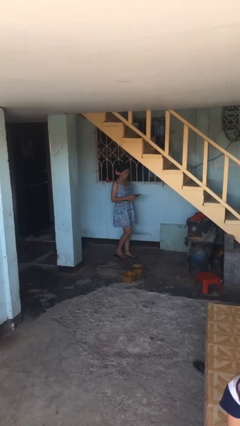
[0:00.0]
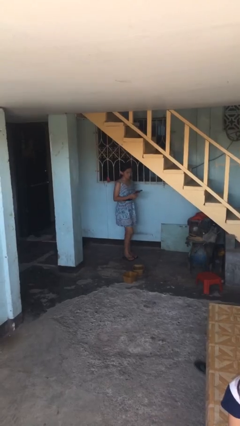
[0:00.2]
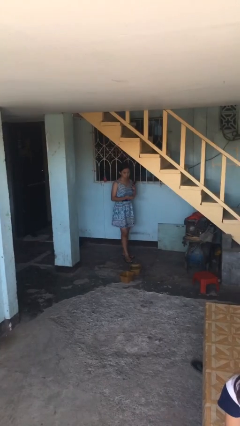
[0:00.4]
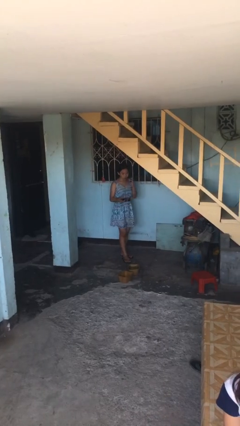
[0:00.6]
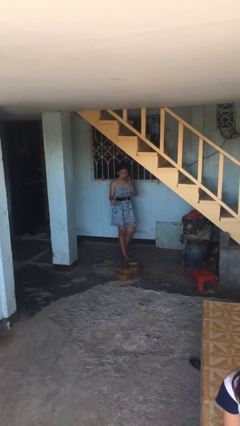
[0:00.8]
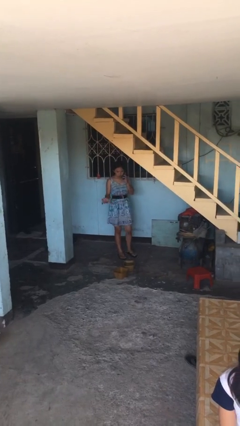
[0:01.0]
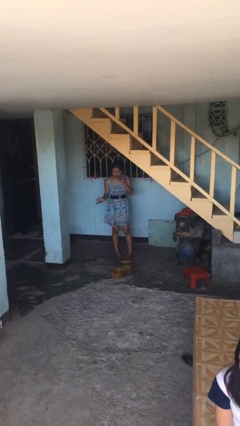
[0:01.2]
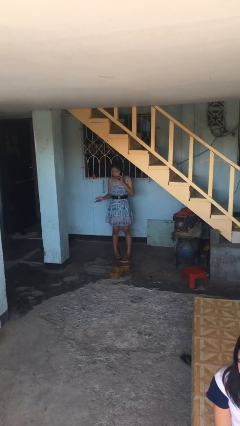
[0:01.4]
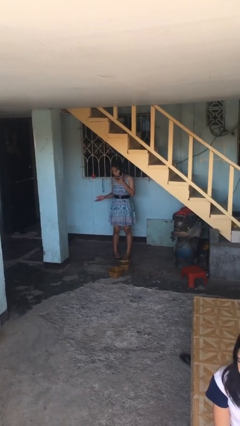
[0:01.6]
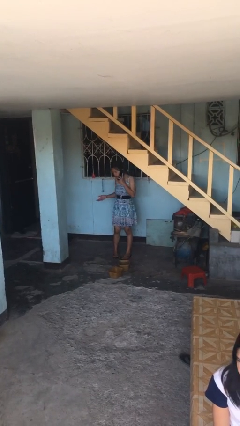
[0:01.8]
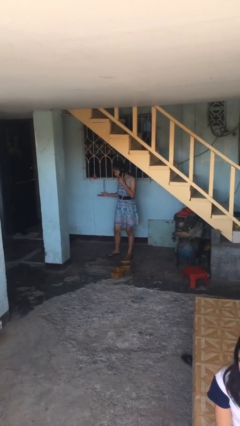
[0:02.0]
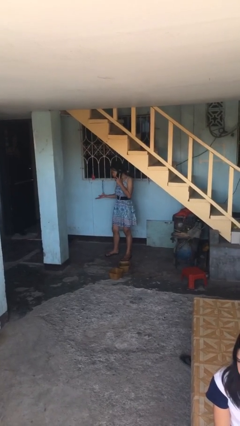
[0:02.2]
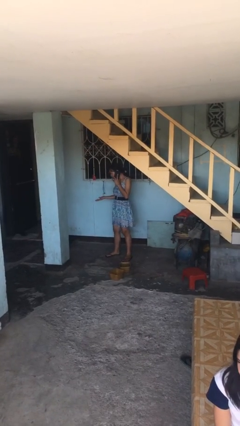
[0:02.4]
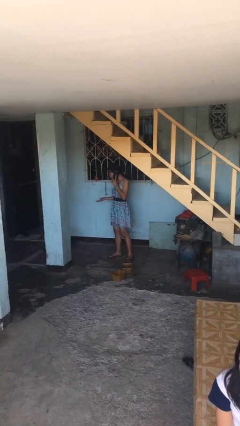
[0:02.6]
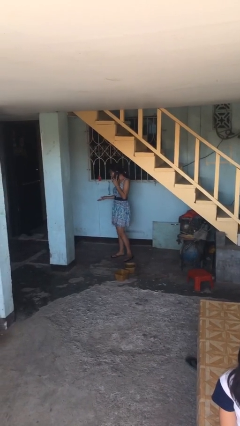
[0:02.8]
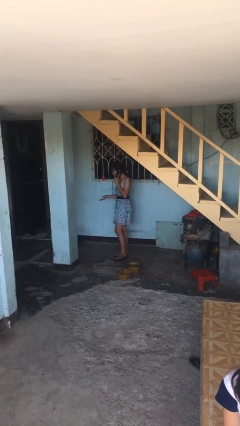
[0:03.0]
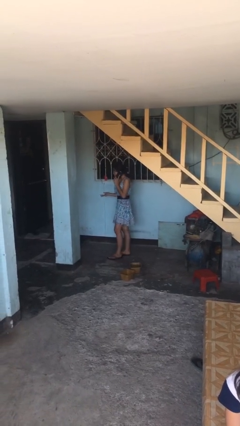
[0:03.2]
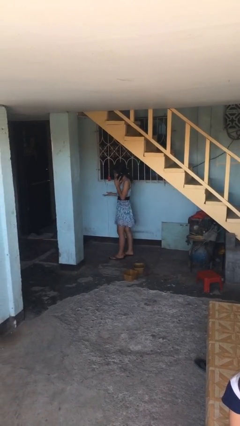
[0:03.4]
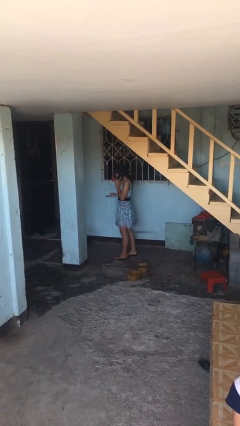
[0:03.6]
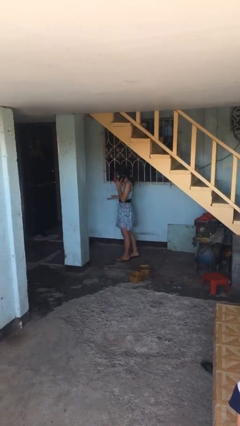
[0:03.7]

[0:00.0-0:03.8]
person talks on phone

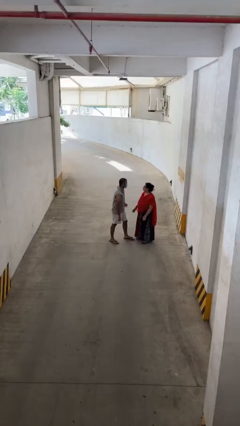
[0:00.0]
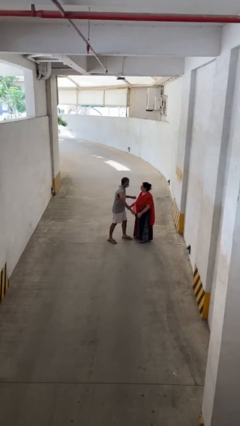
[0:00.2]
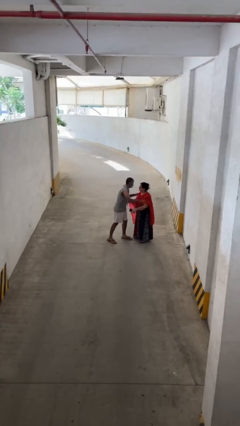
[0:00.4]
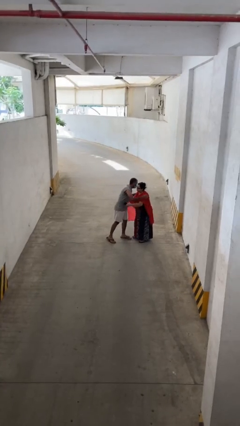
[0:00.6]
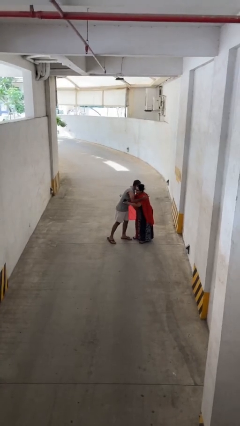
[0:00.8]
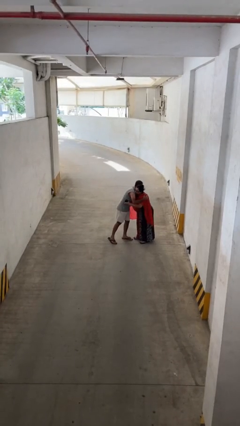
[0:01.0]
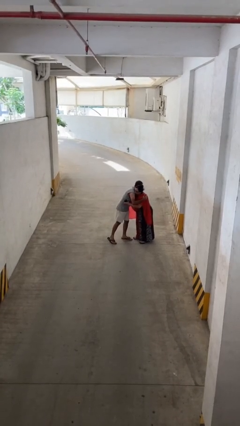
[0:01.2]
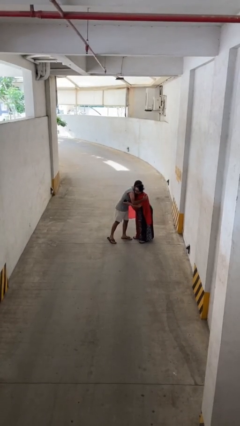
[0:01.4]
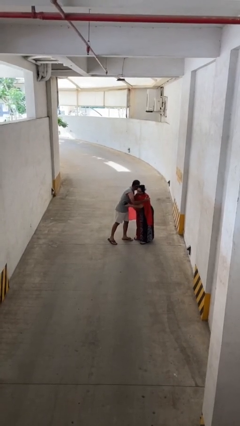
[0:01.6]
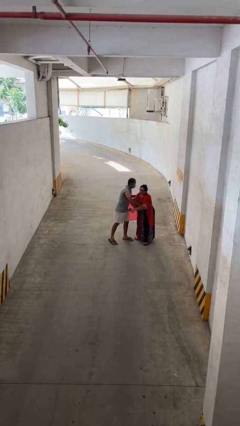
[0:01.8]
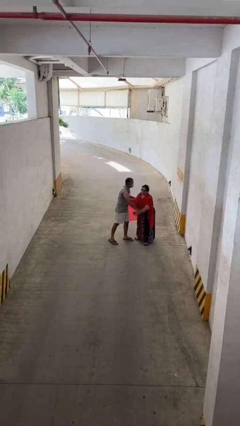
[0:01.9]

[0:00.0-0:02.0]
person embraces person

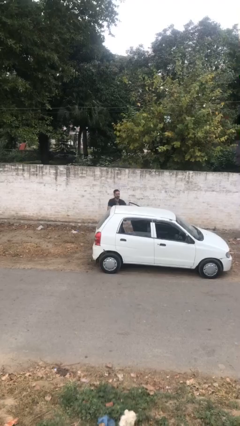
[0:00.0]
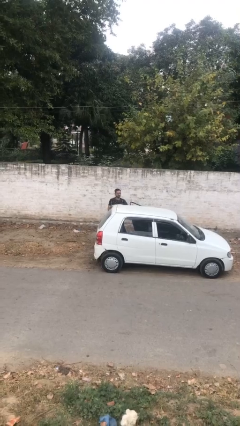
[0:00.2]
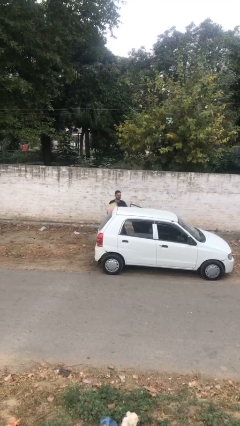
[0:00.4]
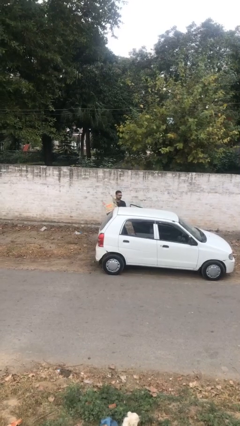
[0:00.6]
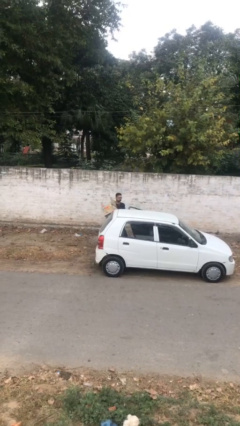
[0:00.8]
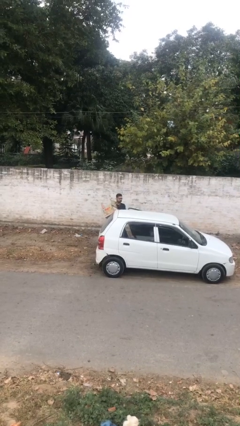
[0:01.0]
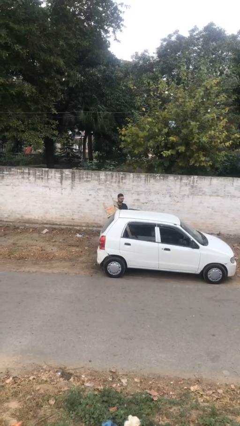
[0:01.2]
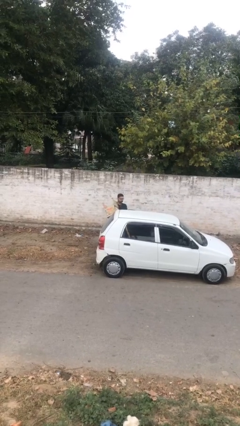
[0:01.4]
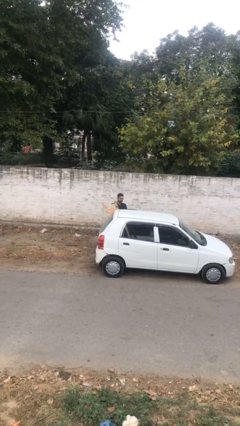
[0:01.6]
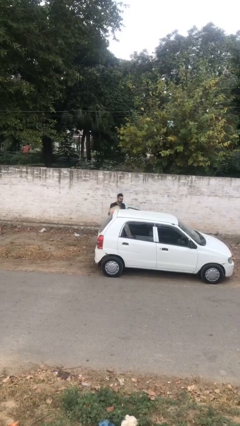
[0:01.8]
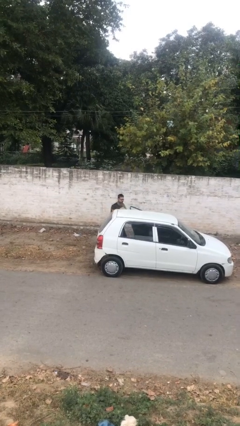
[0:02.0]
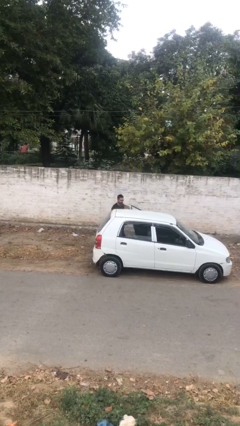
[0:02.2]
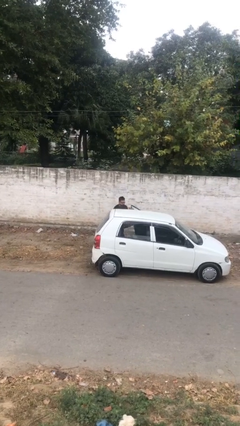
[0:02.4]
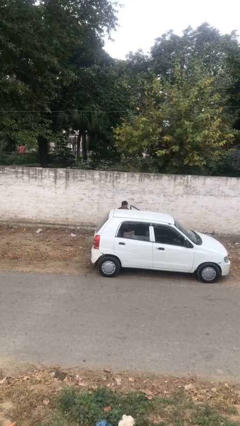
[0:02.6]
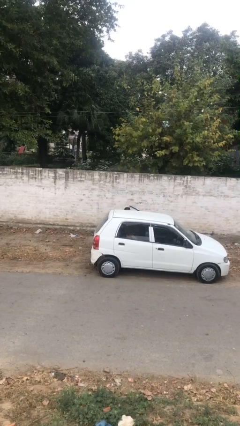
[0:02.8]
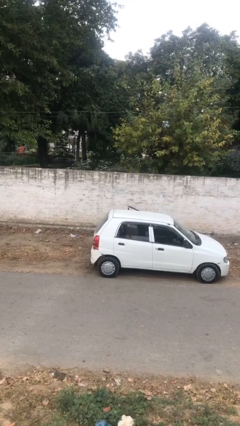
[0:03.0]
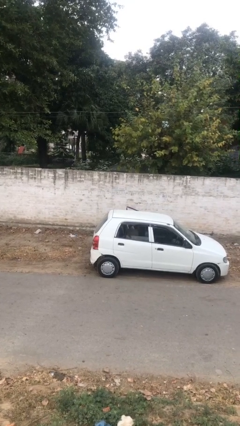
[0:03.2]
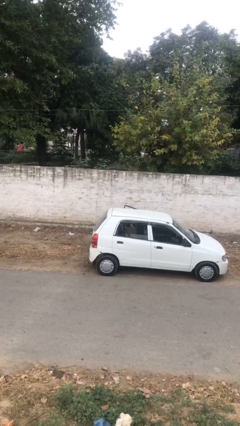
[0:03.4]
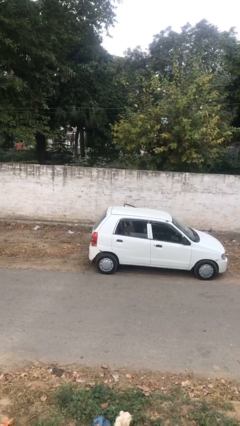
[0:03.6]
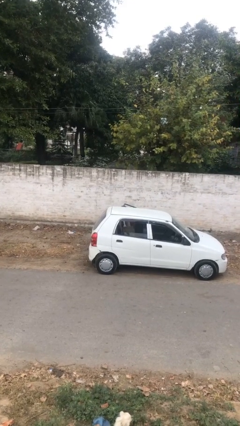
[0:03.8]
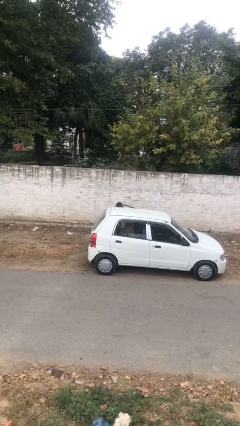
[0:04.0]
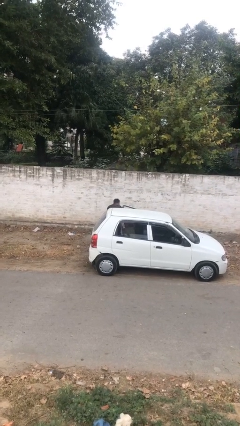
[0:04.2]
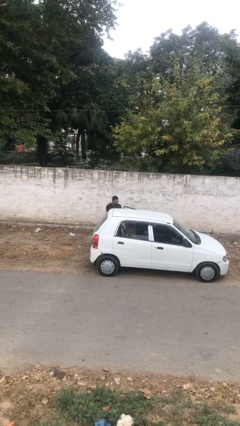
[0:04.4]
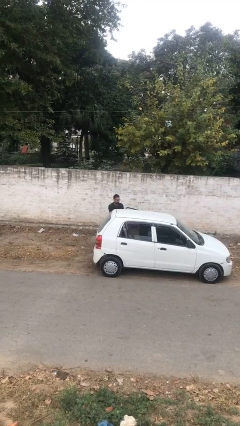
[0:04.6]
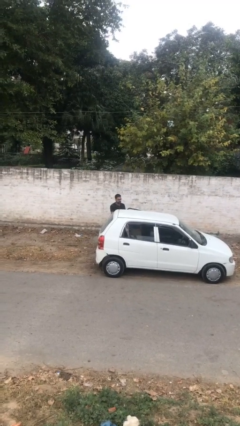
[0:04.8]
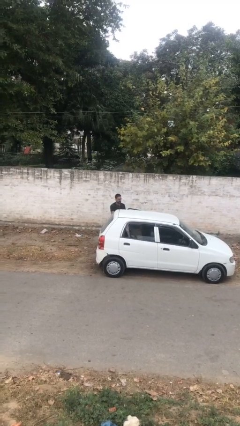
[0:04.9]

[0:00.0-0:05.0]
person loads car

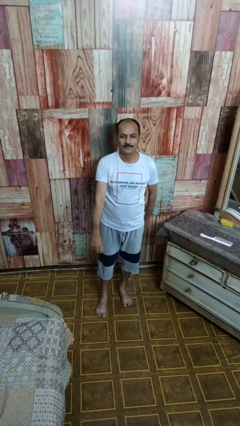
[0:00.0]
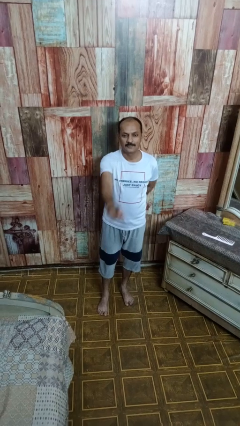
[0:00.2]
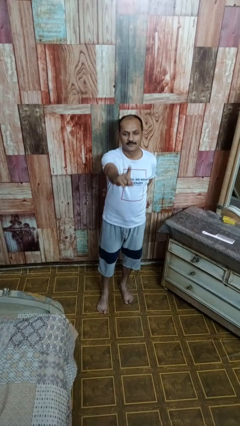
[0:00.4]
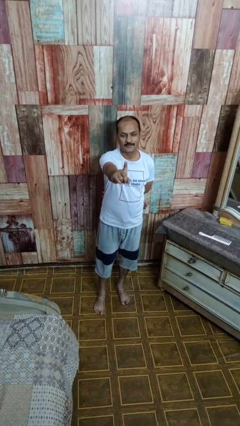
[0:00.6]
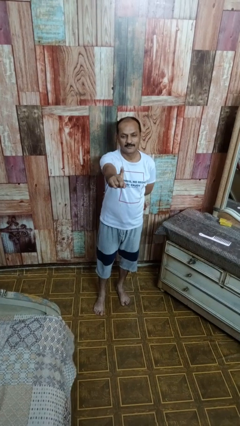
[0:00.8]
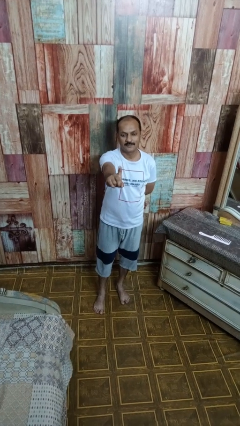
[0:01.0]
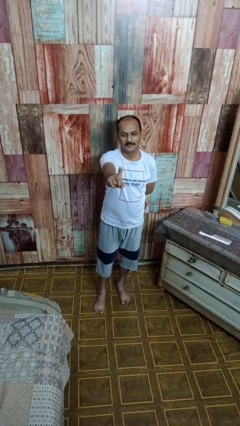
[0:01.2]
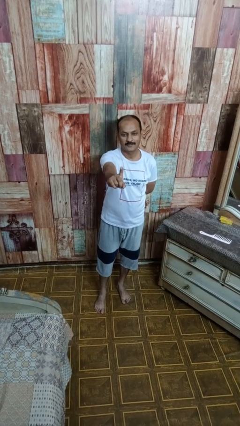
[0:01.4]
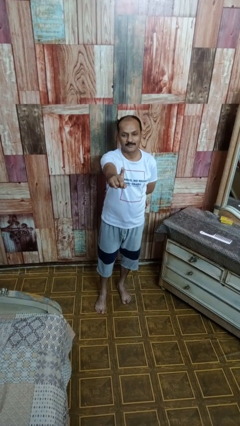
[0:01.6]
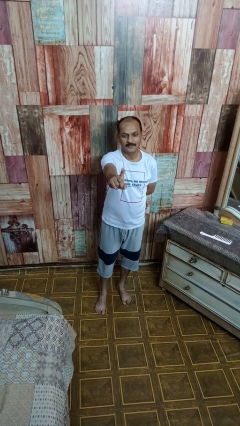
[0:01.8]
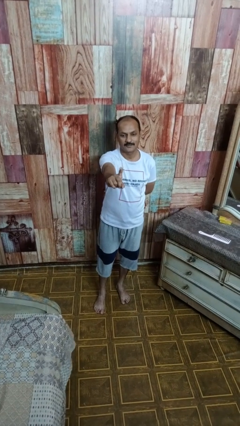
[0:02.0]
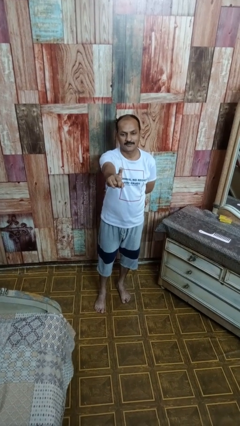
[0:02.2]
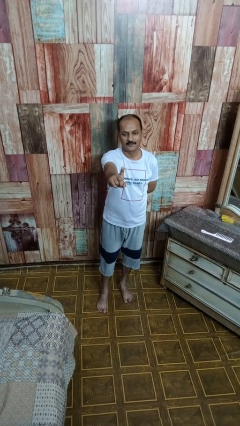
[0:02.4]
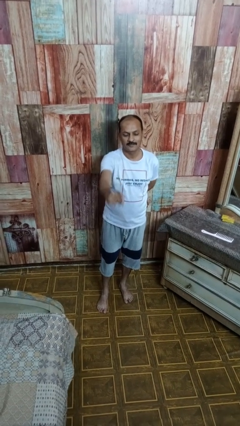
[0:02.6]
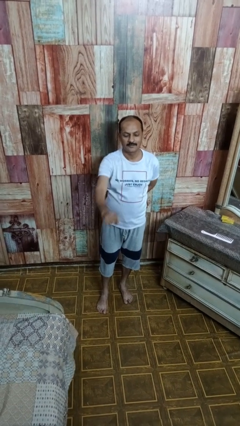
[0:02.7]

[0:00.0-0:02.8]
person gestures number one

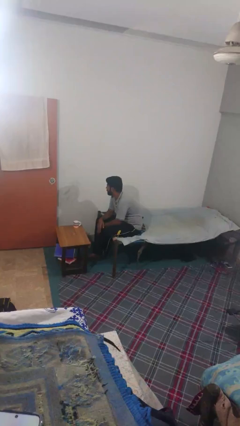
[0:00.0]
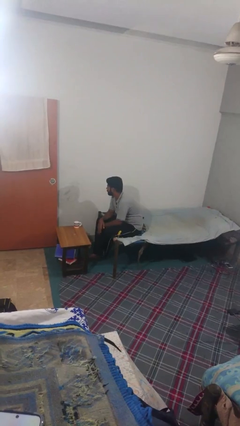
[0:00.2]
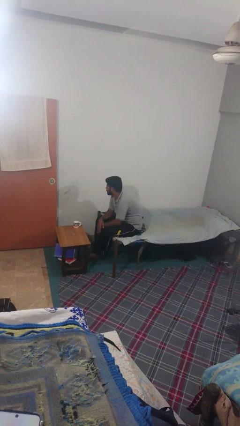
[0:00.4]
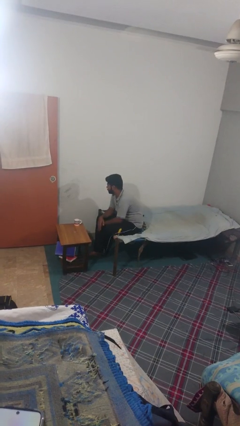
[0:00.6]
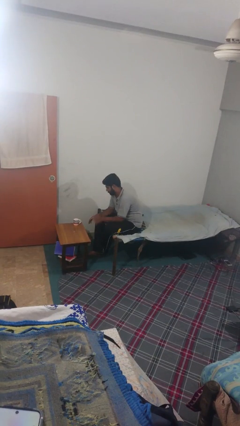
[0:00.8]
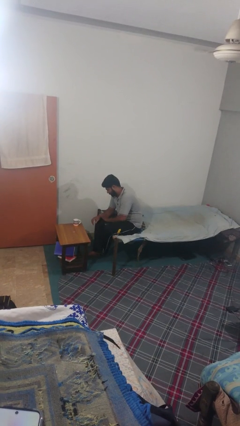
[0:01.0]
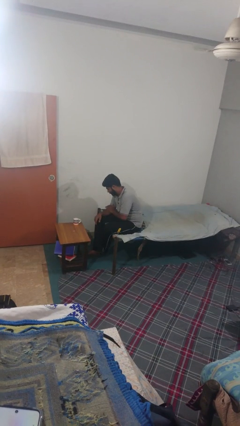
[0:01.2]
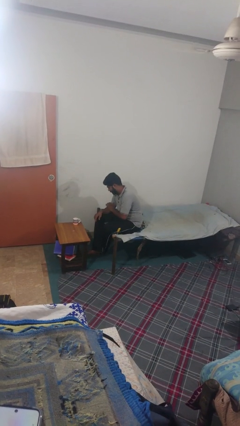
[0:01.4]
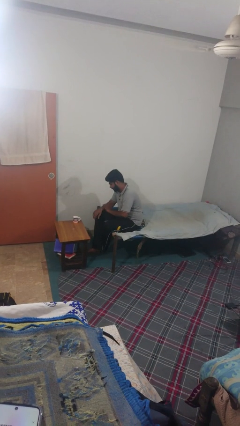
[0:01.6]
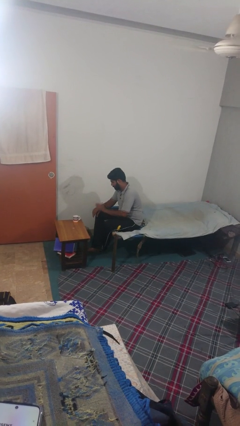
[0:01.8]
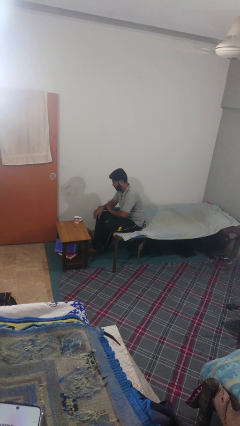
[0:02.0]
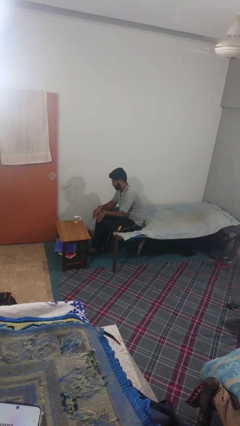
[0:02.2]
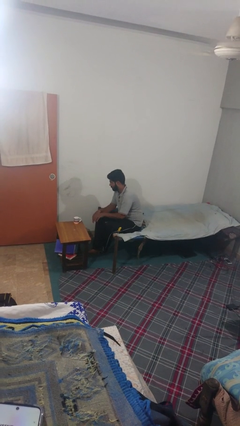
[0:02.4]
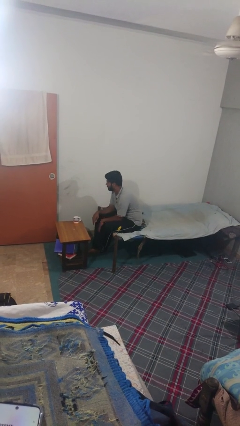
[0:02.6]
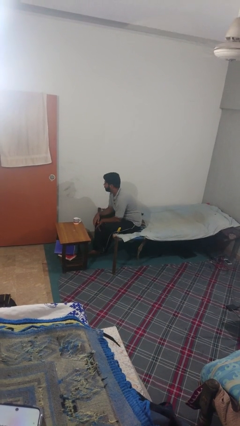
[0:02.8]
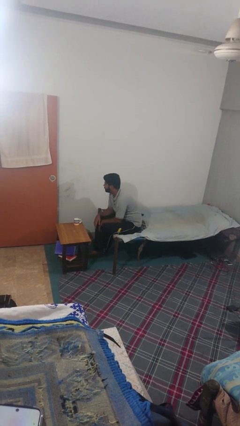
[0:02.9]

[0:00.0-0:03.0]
person swats bug

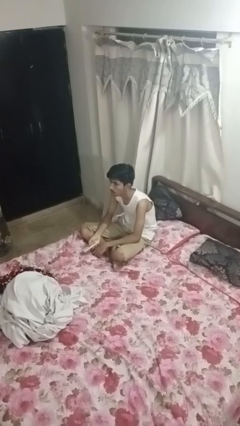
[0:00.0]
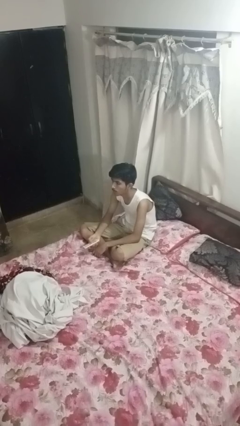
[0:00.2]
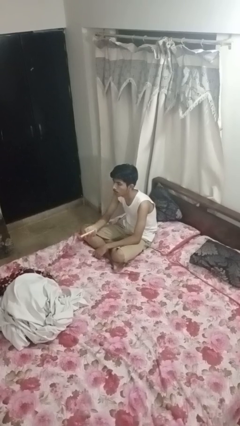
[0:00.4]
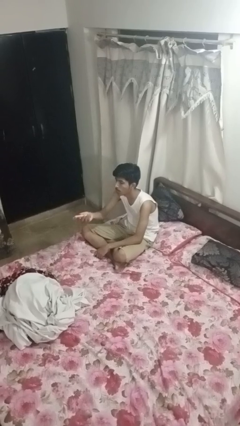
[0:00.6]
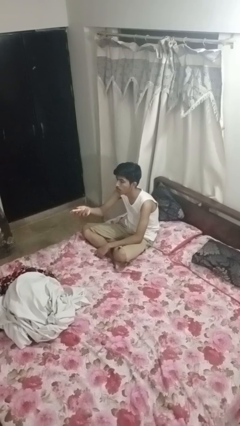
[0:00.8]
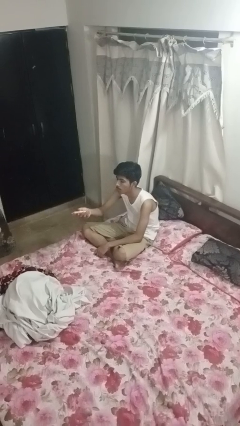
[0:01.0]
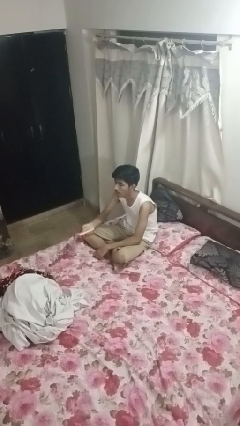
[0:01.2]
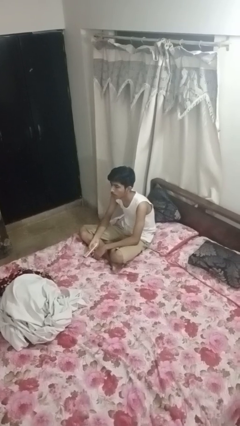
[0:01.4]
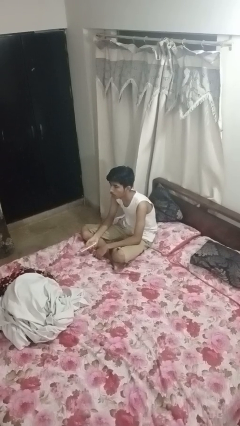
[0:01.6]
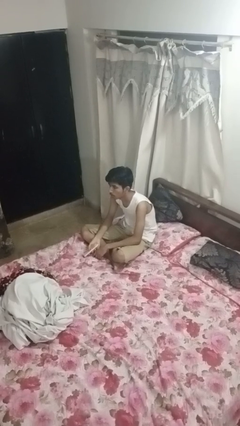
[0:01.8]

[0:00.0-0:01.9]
person uses television remote
